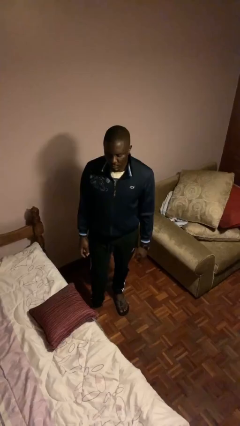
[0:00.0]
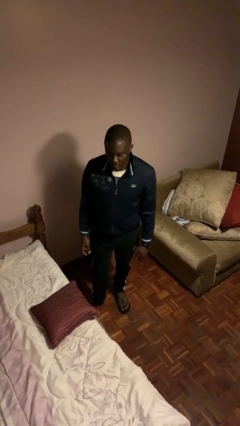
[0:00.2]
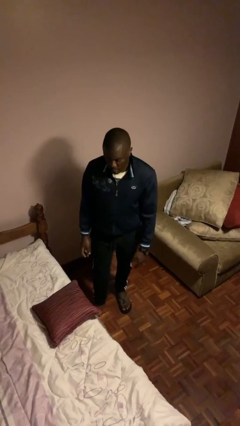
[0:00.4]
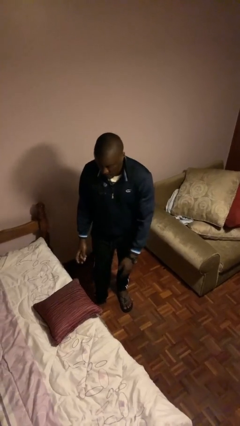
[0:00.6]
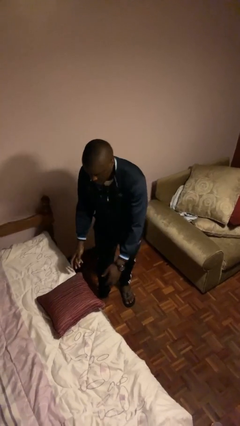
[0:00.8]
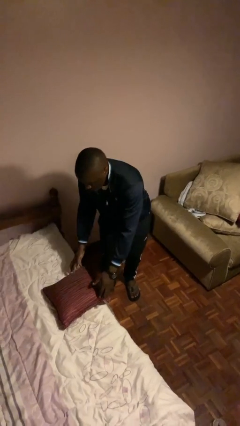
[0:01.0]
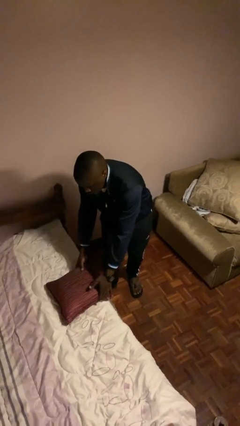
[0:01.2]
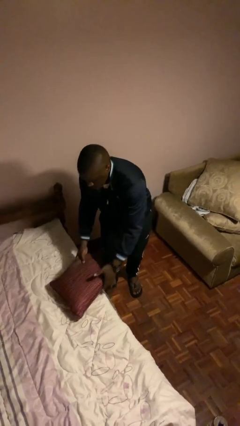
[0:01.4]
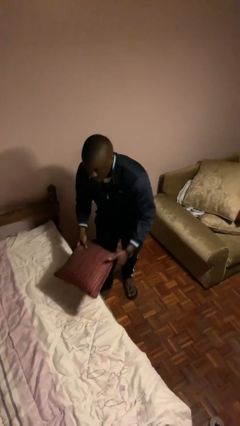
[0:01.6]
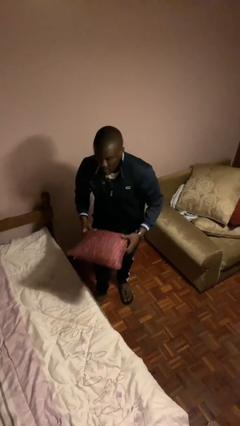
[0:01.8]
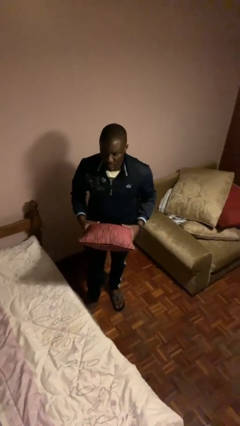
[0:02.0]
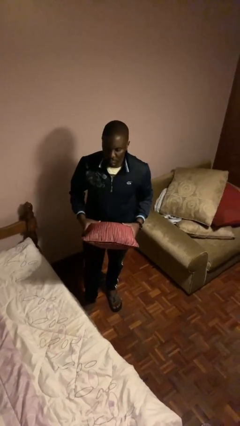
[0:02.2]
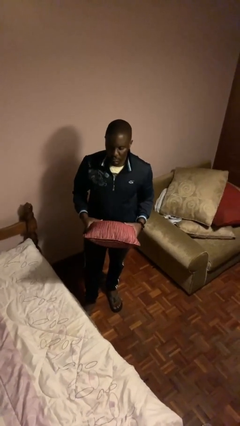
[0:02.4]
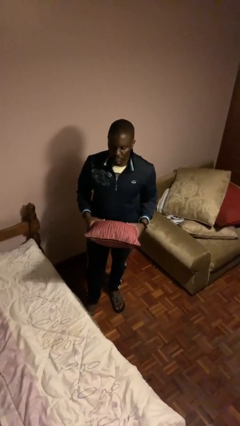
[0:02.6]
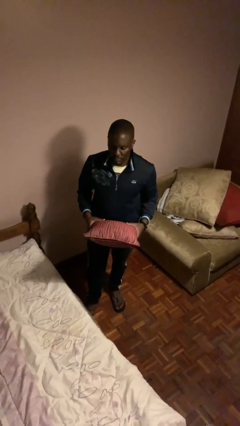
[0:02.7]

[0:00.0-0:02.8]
person picks up object from bed

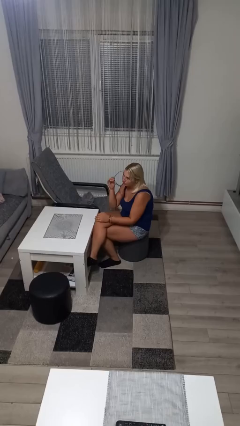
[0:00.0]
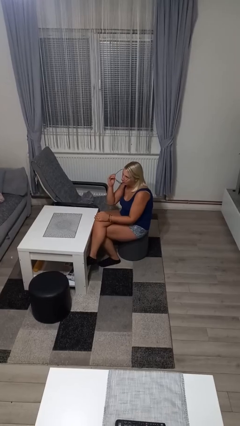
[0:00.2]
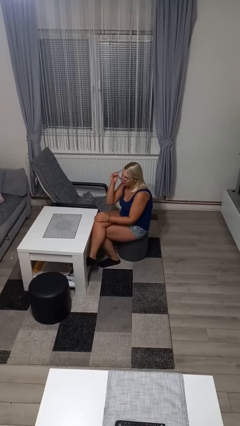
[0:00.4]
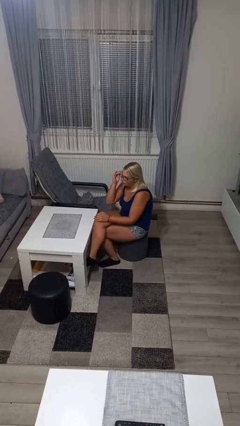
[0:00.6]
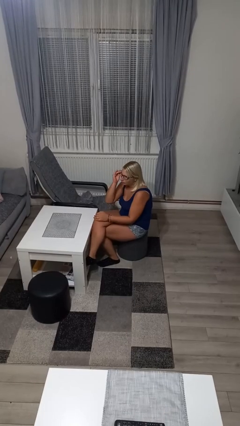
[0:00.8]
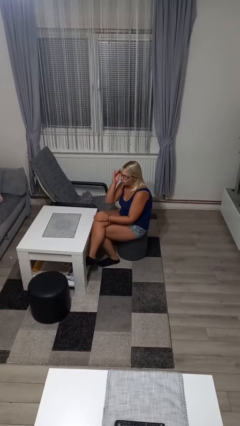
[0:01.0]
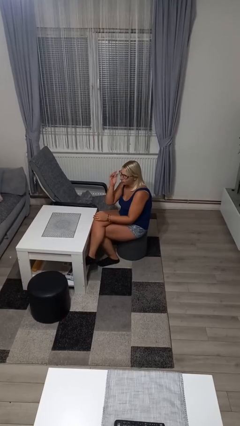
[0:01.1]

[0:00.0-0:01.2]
person puts on glasses

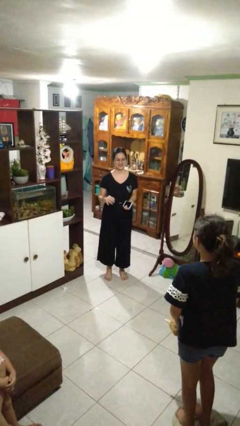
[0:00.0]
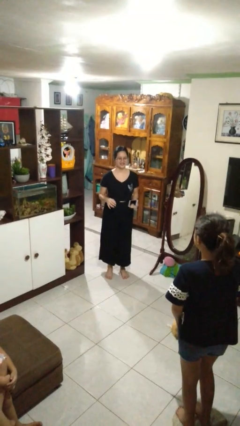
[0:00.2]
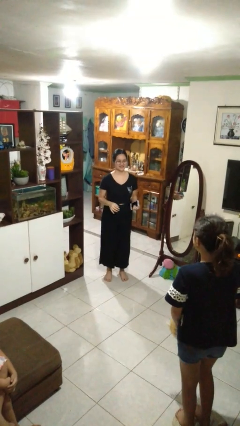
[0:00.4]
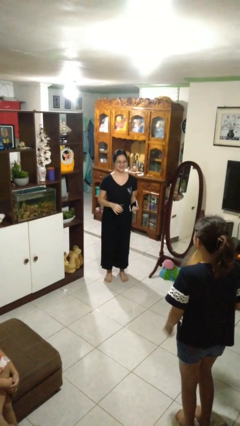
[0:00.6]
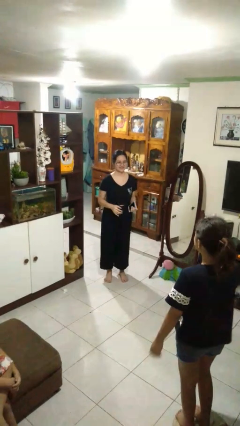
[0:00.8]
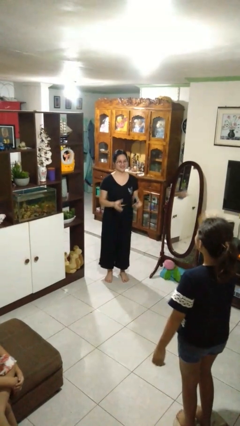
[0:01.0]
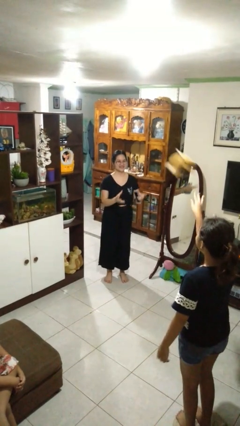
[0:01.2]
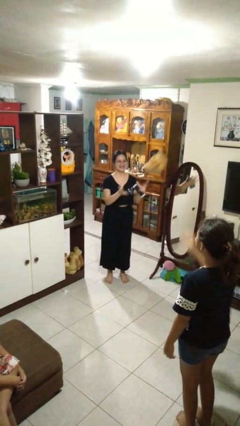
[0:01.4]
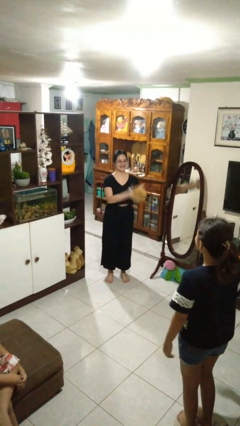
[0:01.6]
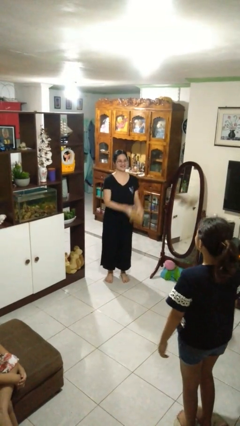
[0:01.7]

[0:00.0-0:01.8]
person catches object from person

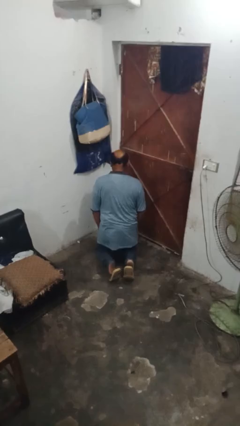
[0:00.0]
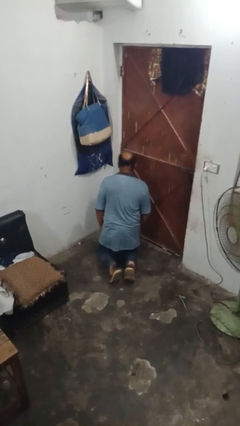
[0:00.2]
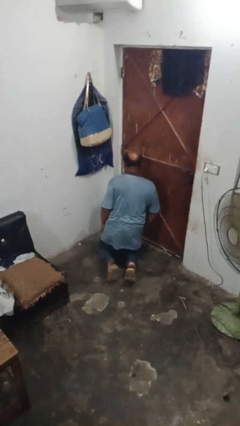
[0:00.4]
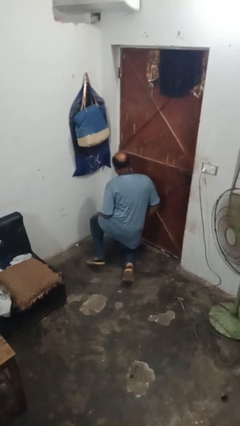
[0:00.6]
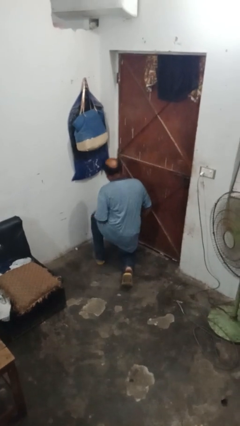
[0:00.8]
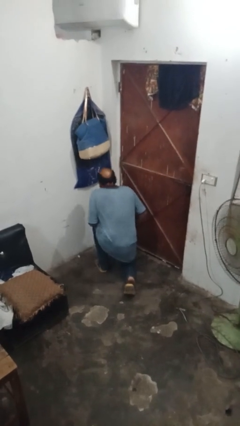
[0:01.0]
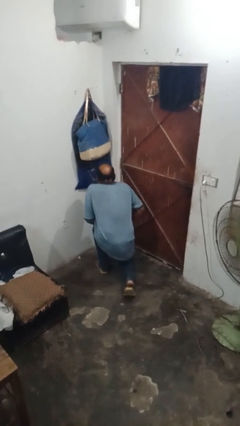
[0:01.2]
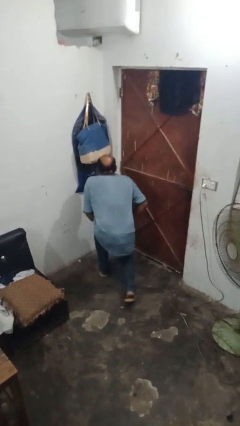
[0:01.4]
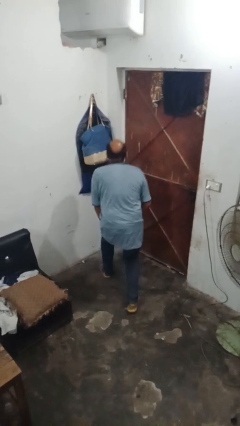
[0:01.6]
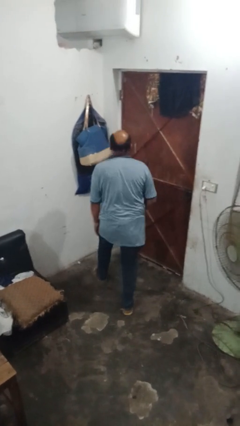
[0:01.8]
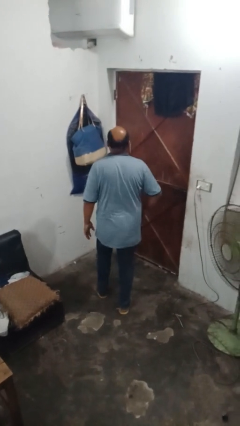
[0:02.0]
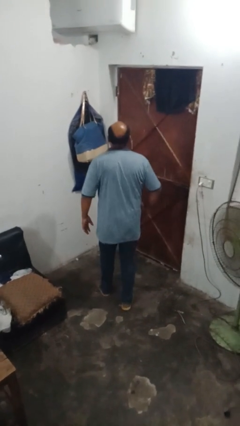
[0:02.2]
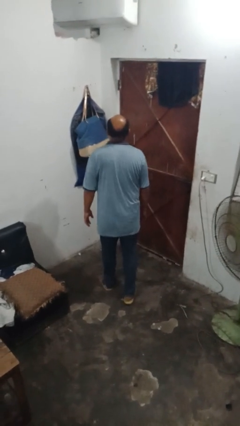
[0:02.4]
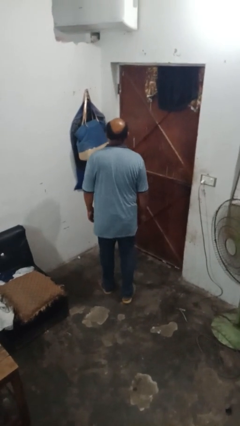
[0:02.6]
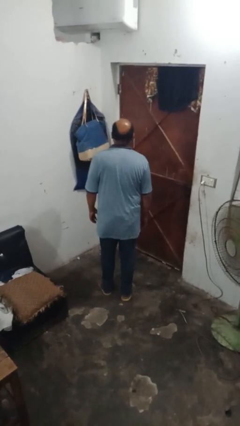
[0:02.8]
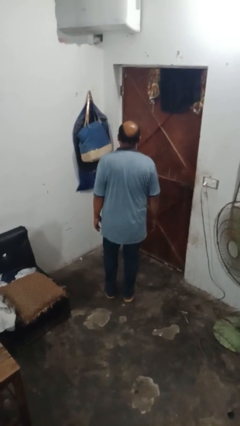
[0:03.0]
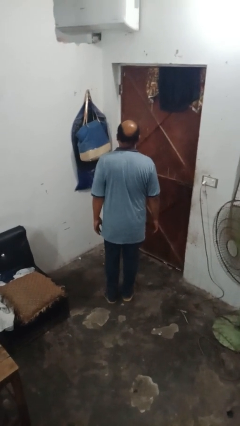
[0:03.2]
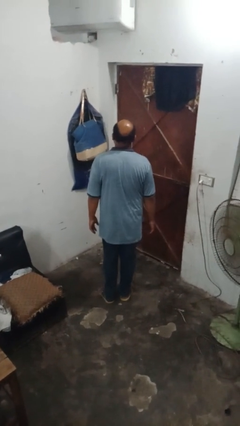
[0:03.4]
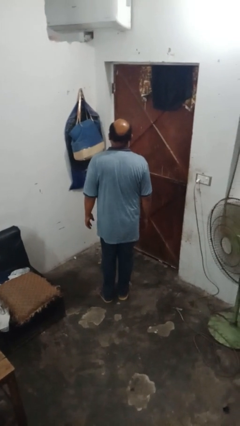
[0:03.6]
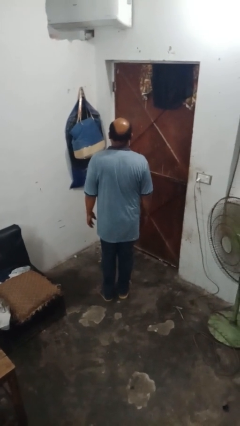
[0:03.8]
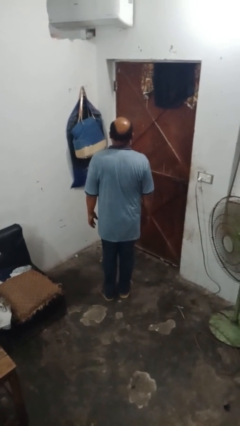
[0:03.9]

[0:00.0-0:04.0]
person stands up

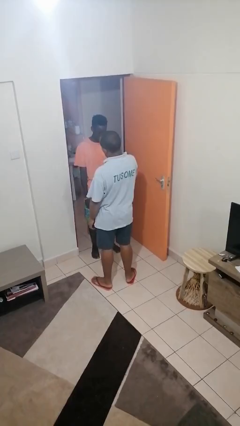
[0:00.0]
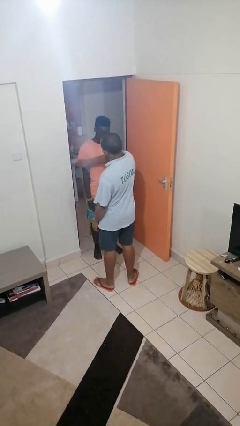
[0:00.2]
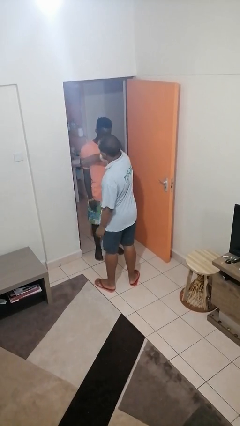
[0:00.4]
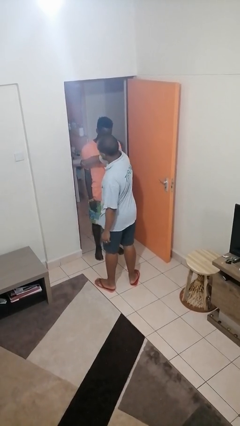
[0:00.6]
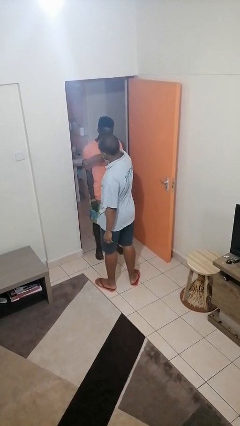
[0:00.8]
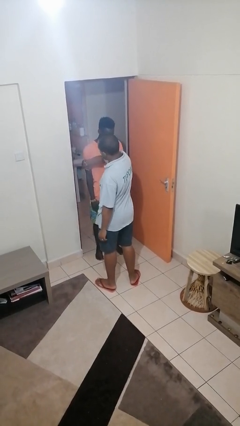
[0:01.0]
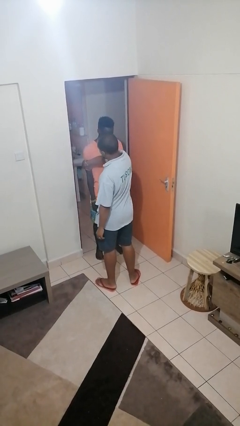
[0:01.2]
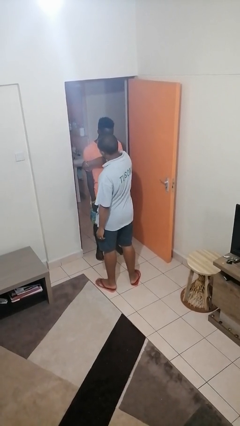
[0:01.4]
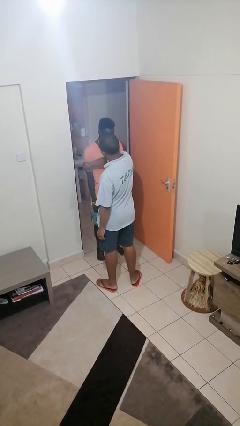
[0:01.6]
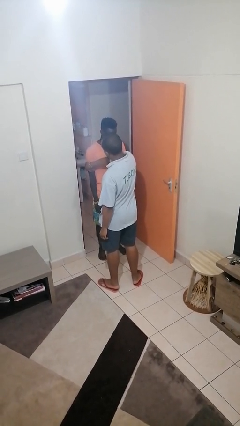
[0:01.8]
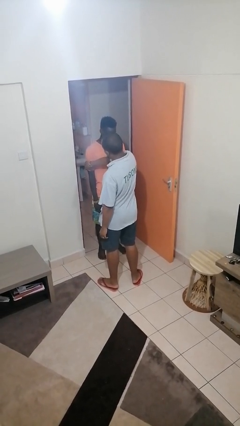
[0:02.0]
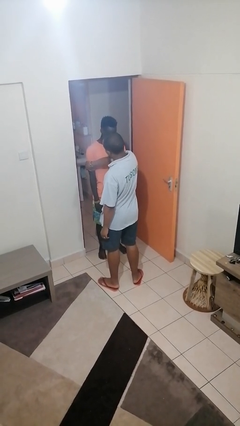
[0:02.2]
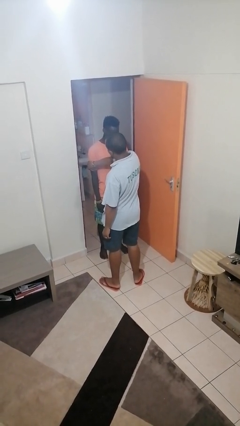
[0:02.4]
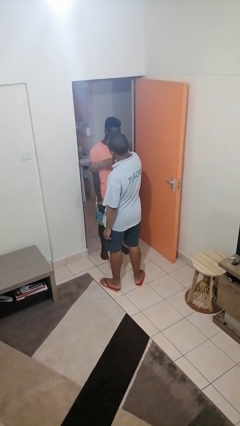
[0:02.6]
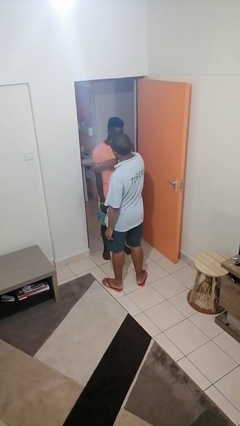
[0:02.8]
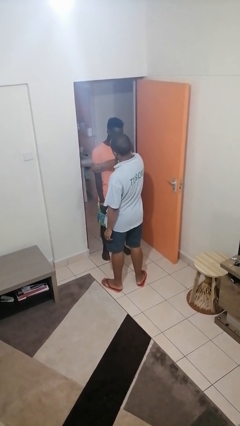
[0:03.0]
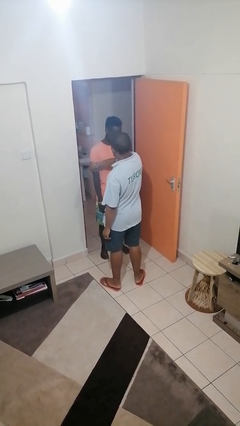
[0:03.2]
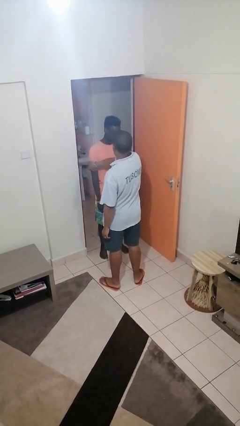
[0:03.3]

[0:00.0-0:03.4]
person grabs person by bicep

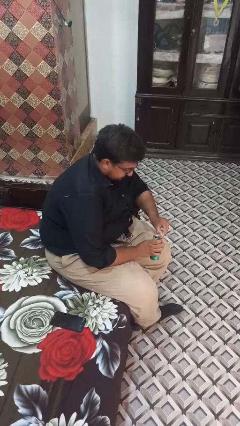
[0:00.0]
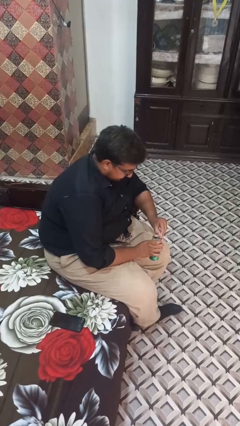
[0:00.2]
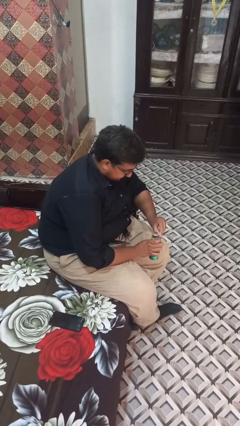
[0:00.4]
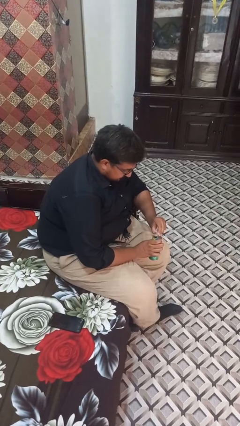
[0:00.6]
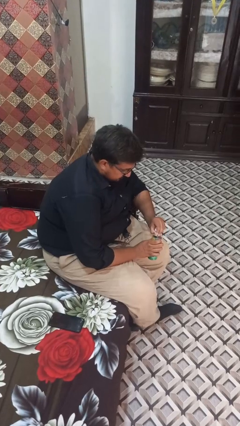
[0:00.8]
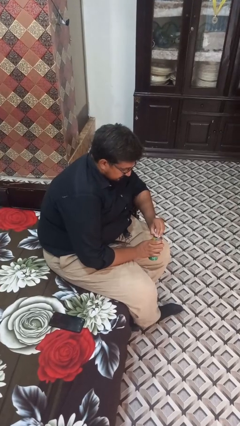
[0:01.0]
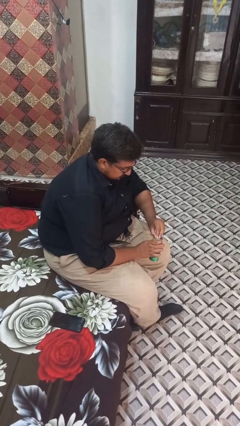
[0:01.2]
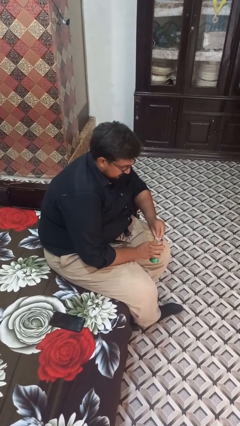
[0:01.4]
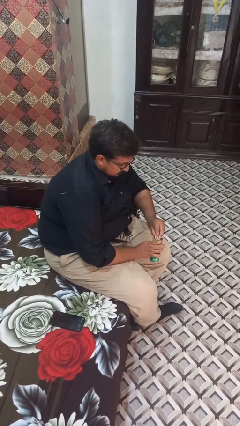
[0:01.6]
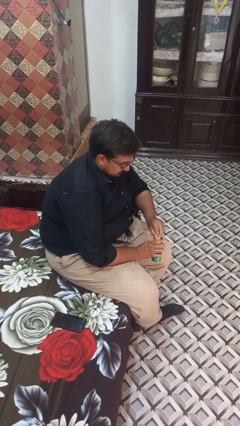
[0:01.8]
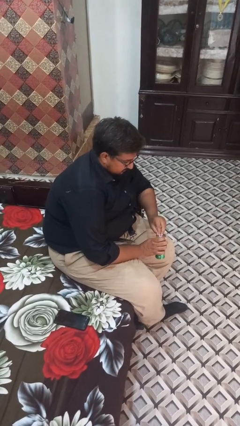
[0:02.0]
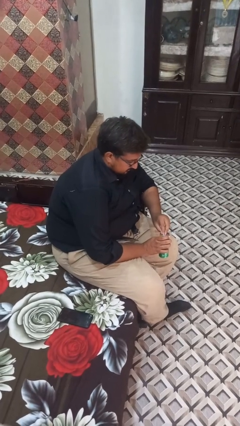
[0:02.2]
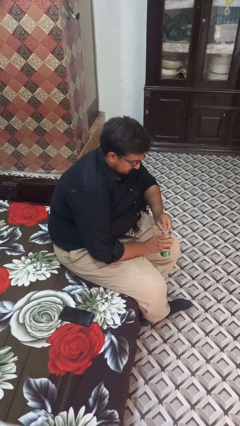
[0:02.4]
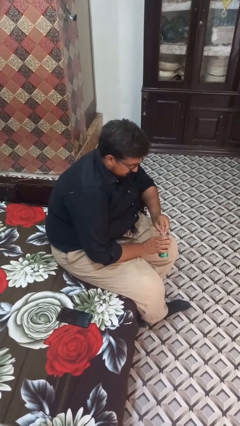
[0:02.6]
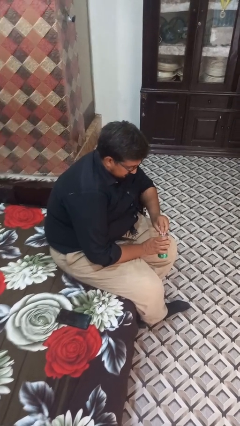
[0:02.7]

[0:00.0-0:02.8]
person opens can with can opener

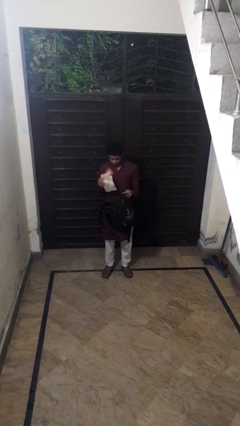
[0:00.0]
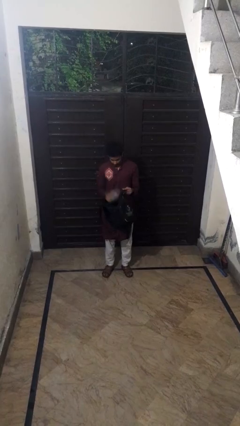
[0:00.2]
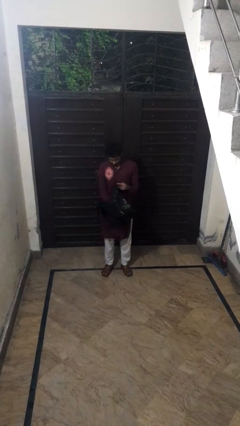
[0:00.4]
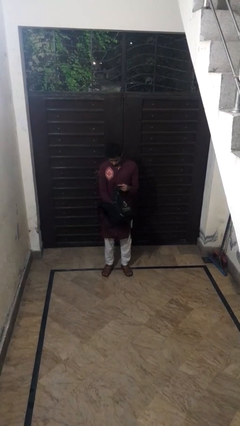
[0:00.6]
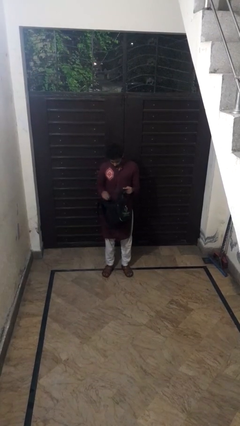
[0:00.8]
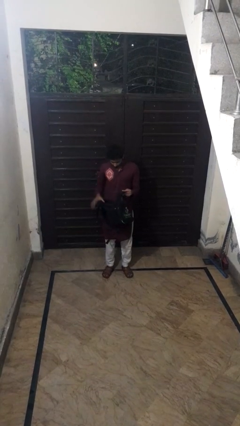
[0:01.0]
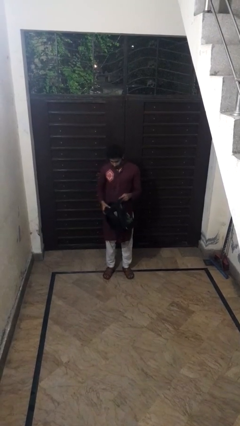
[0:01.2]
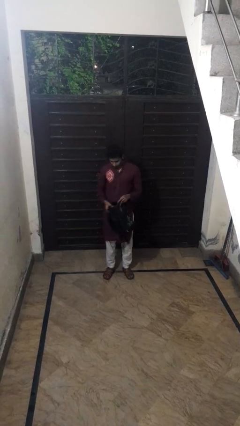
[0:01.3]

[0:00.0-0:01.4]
person puts object into backpack
